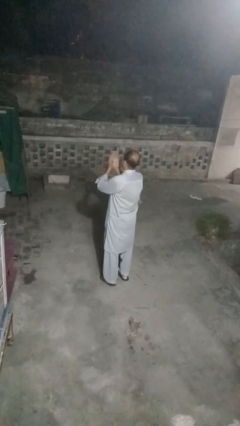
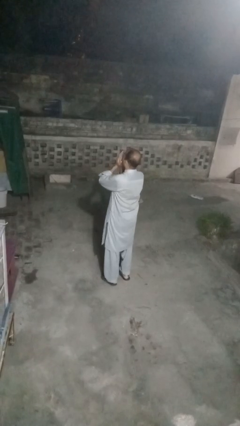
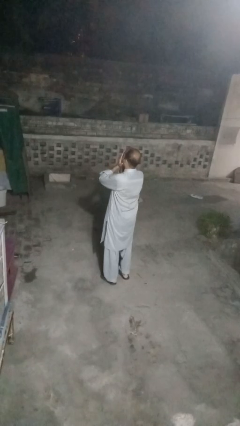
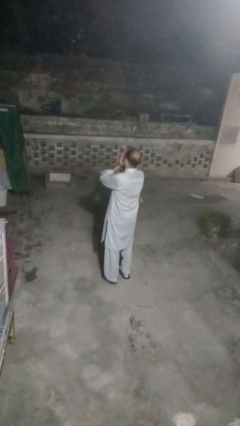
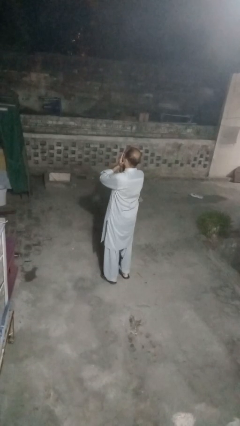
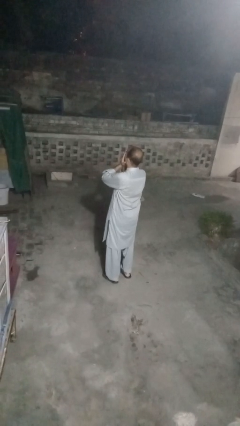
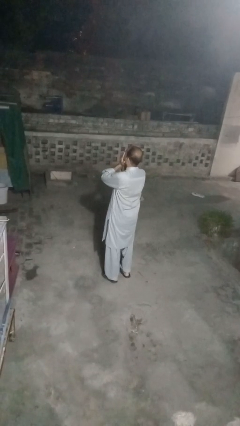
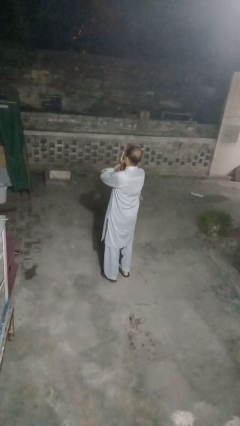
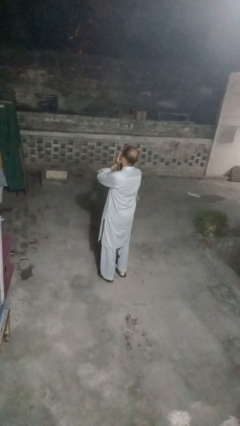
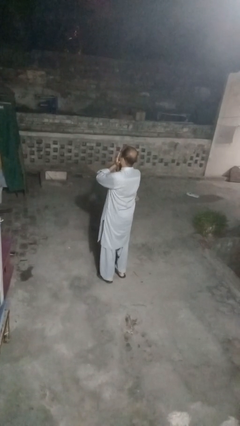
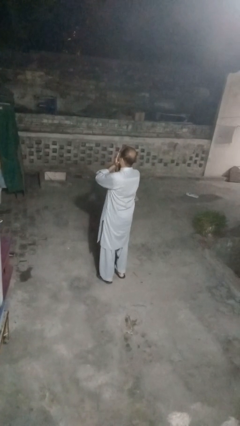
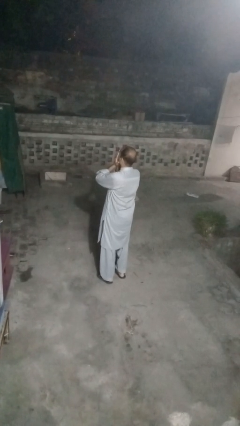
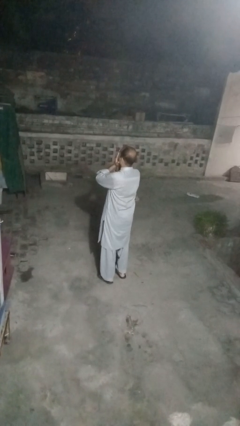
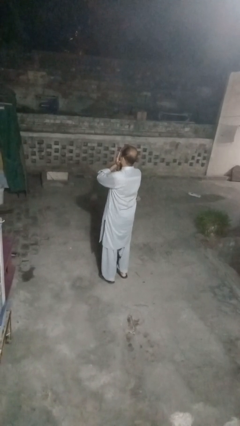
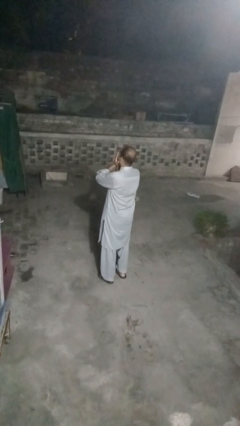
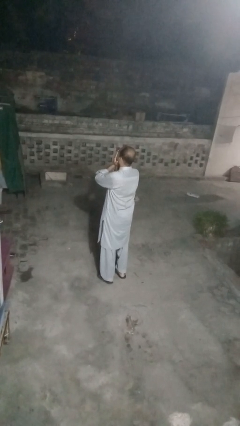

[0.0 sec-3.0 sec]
person covers face with hands

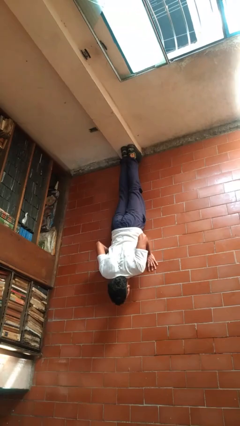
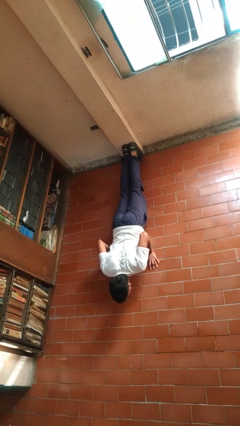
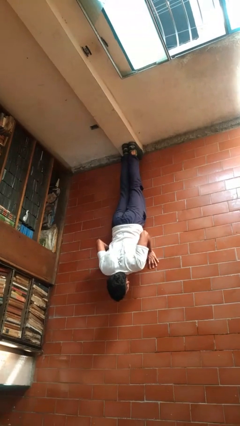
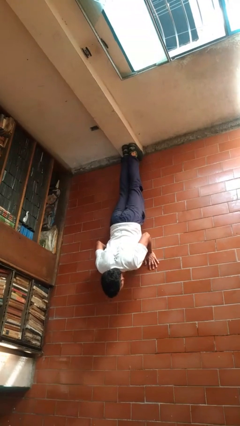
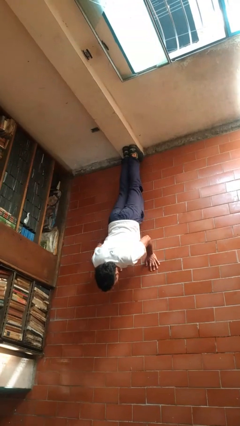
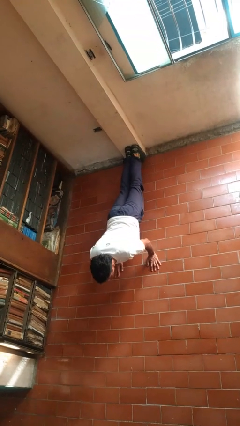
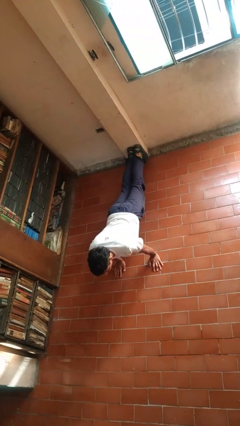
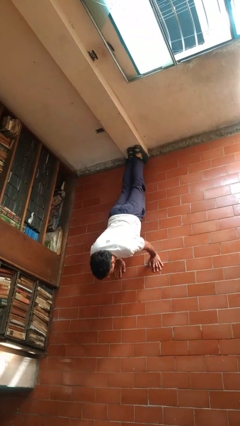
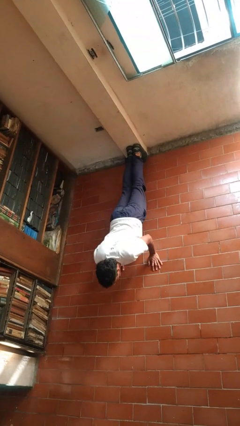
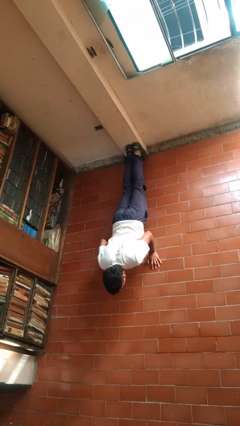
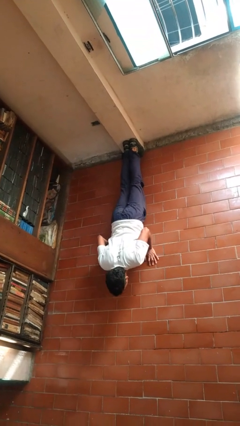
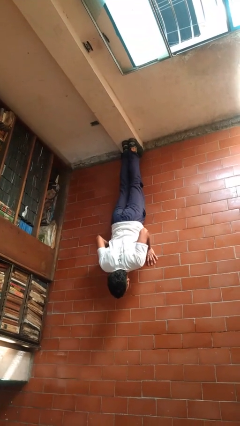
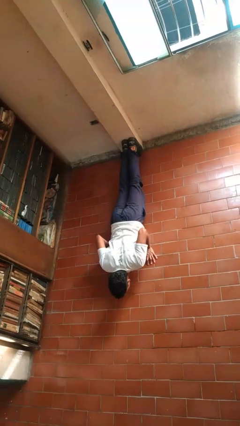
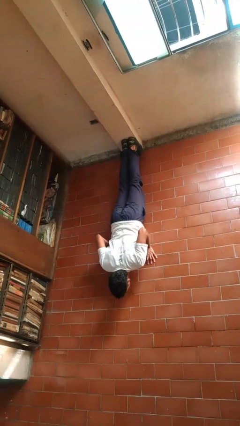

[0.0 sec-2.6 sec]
person exercises with pushup

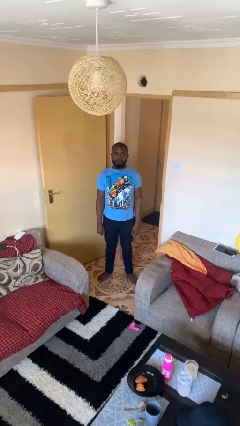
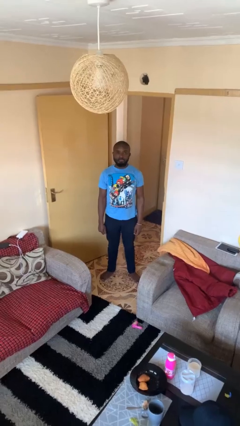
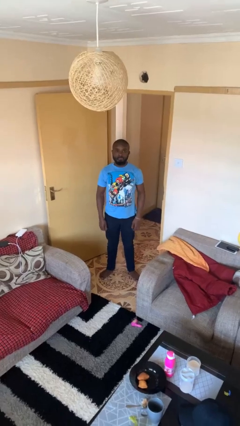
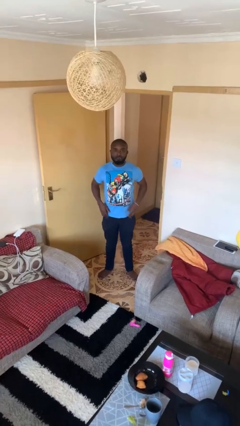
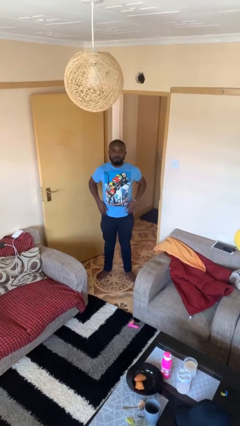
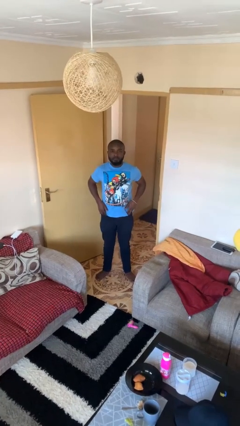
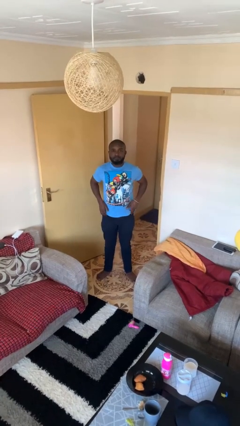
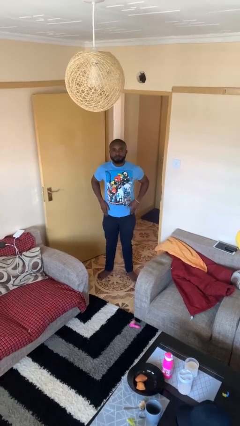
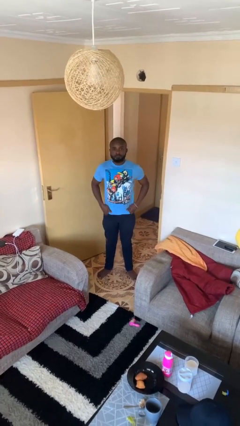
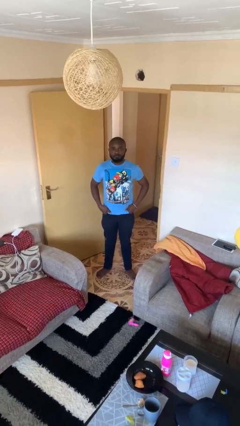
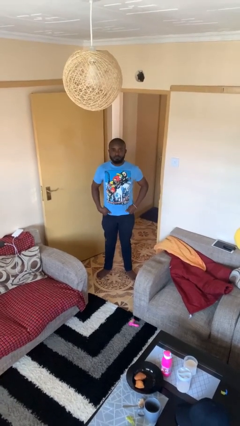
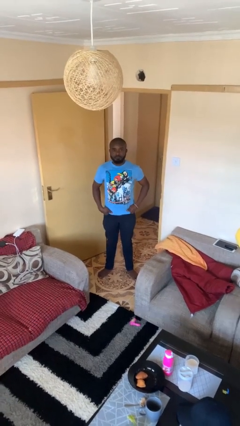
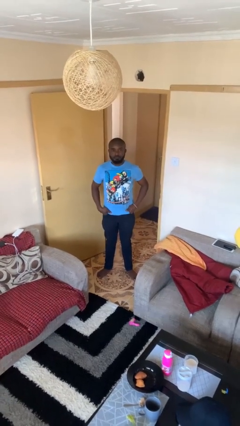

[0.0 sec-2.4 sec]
person puts hands in back pockets

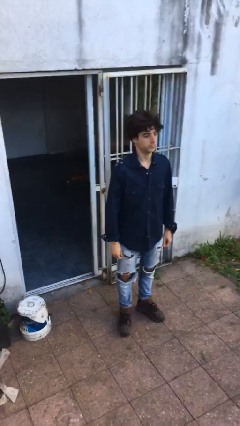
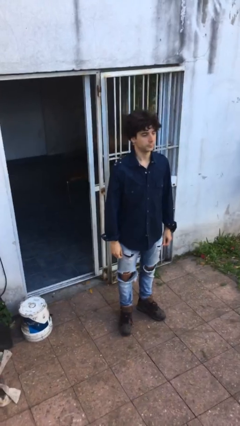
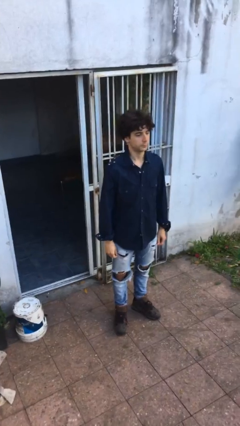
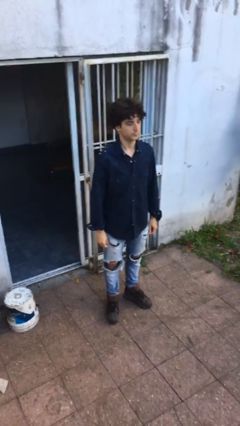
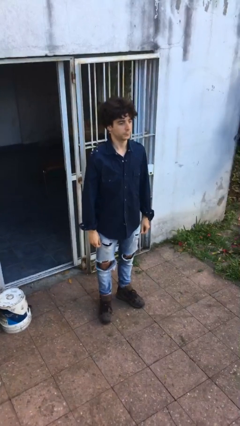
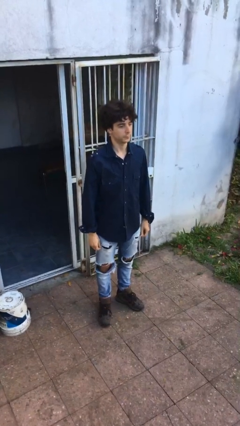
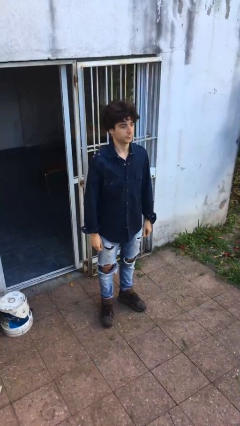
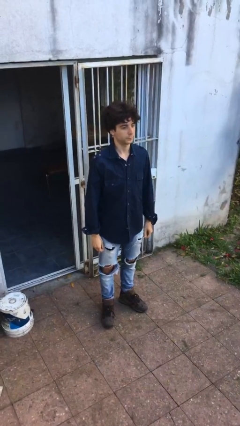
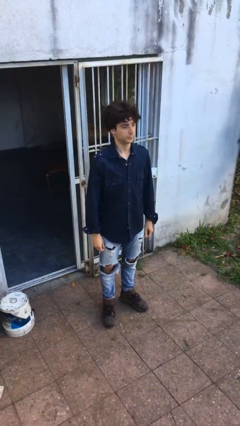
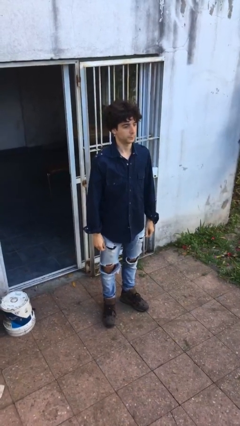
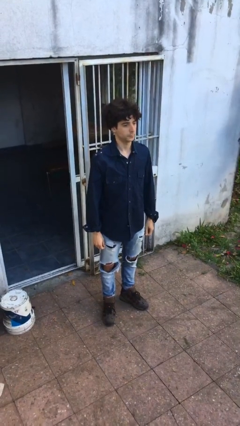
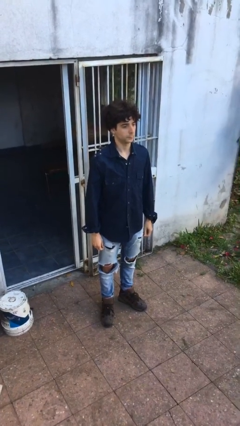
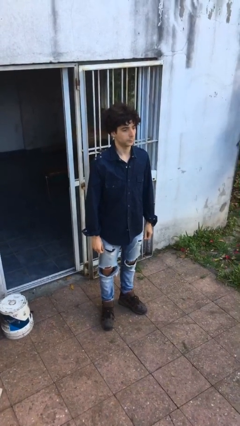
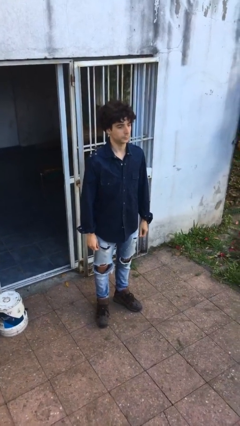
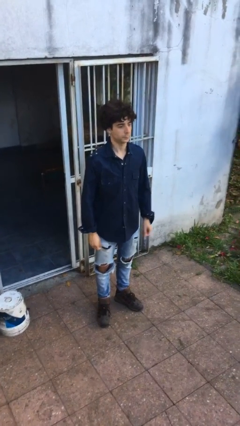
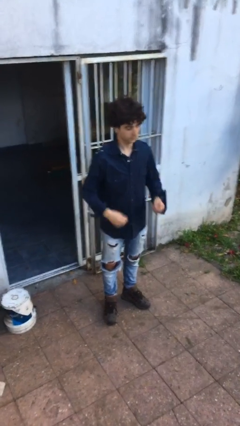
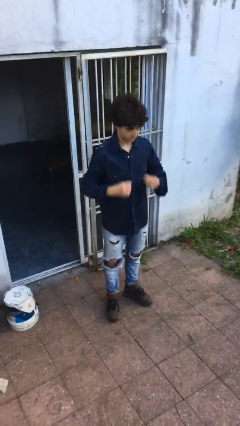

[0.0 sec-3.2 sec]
person unbuttons shirt

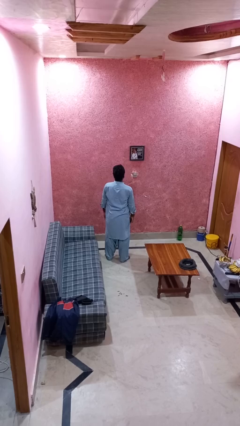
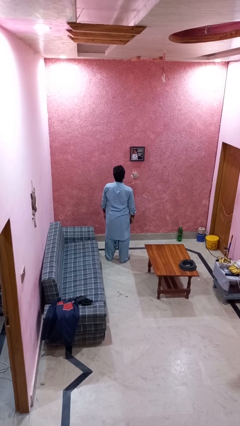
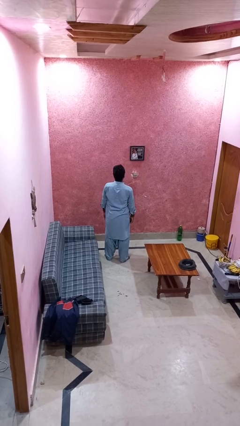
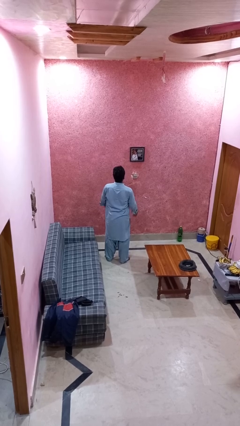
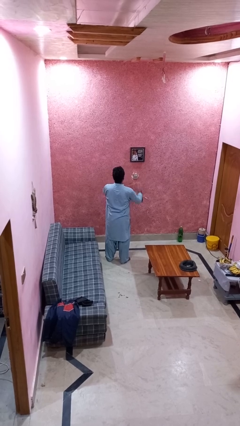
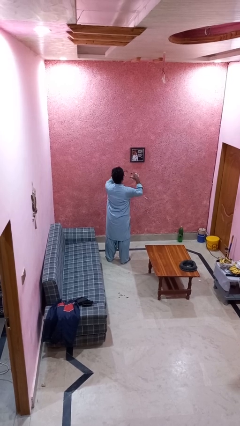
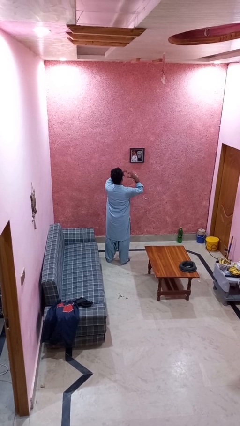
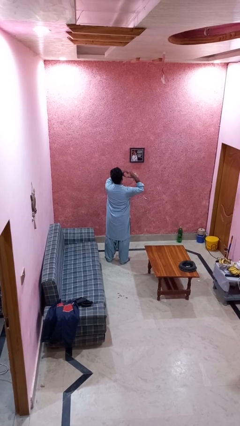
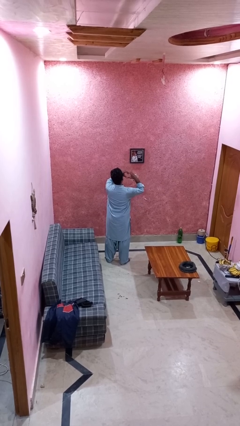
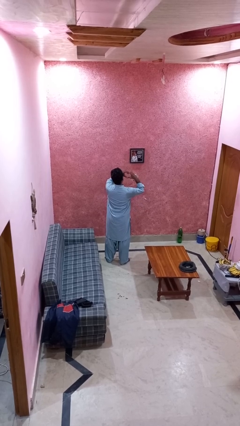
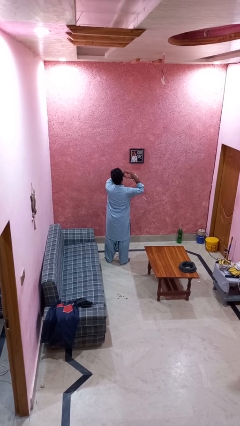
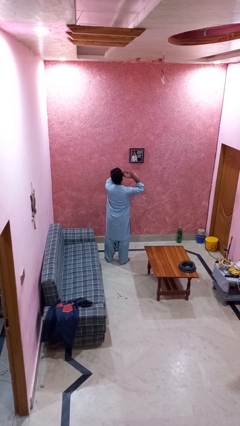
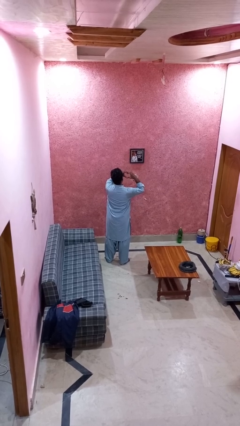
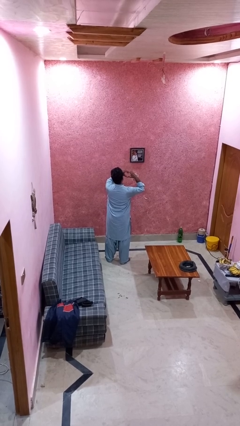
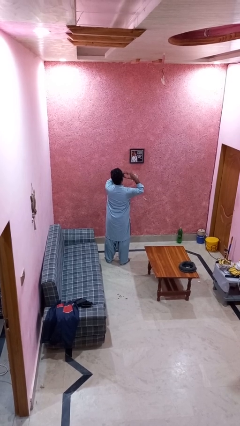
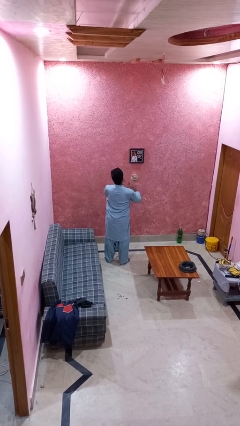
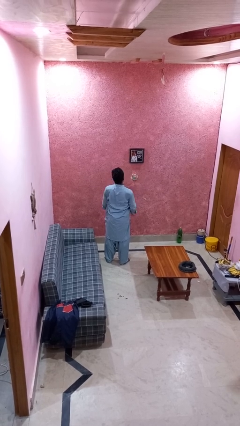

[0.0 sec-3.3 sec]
person gestures heart

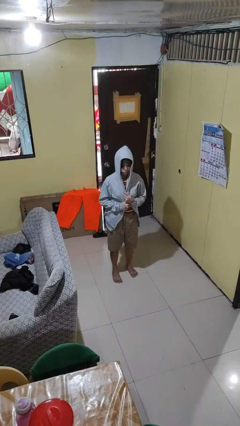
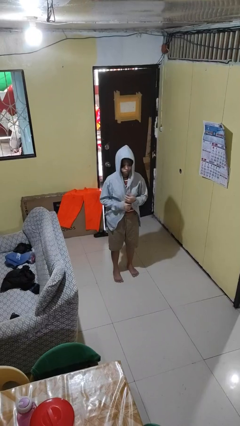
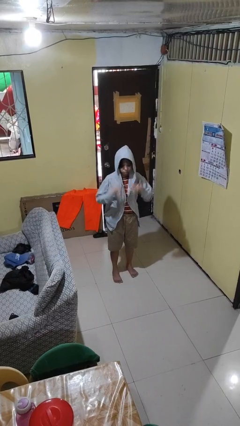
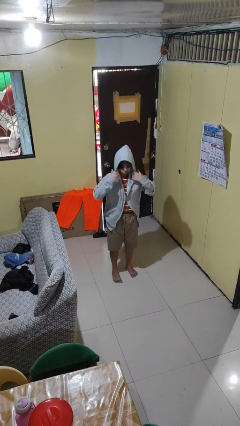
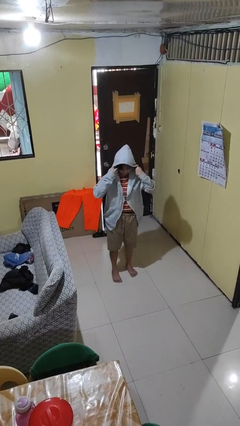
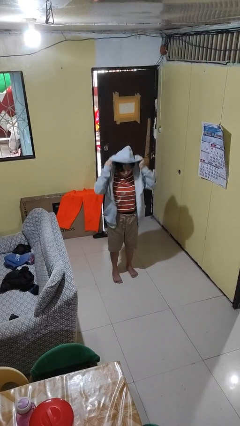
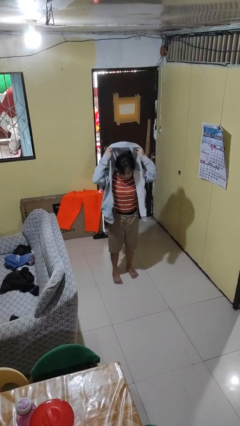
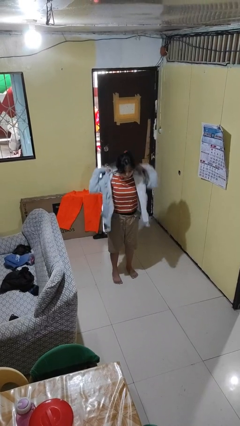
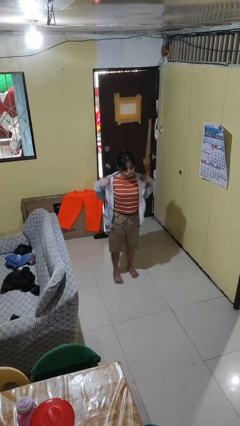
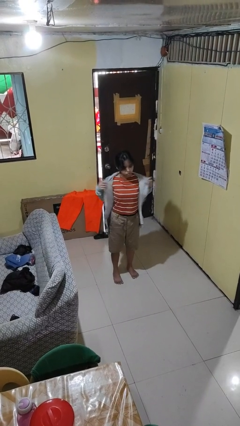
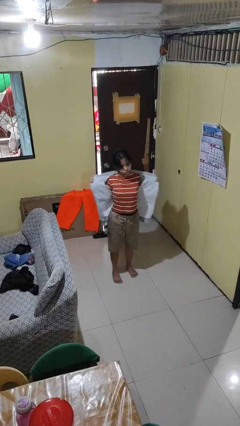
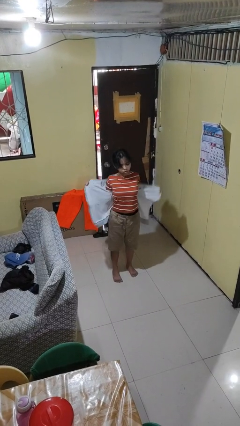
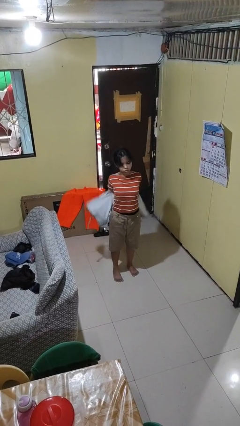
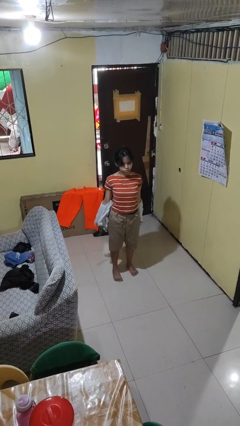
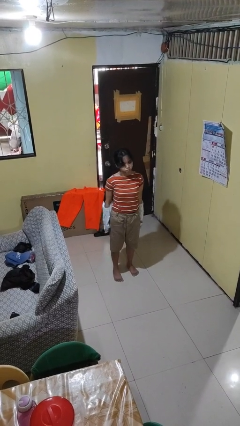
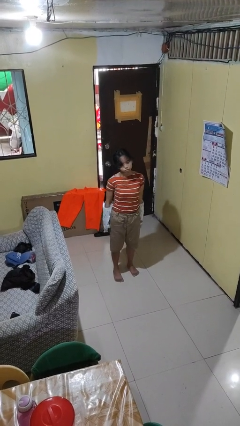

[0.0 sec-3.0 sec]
person takes off hoodie
